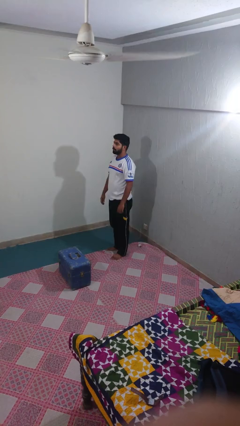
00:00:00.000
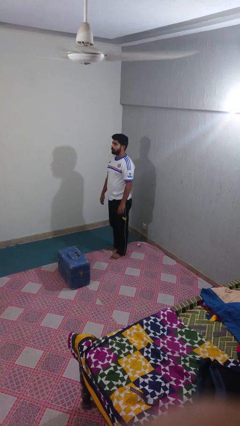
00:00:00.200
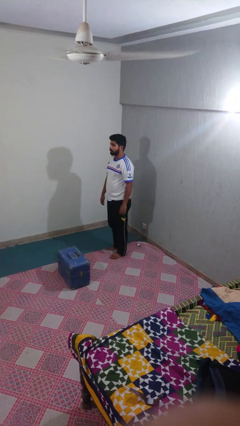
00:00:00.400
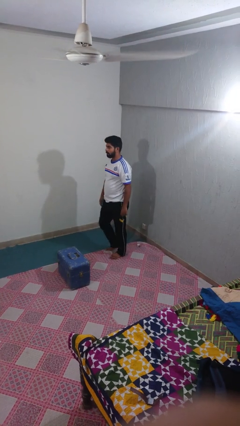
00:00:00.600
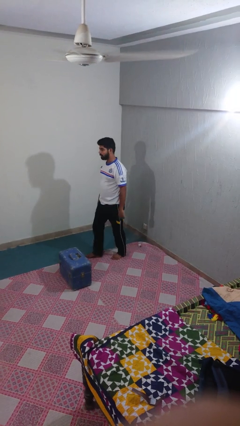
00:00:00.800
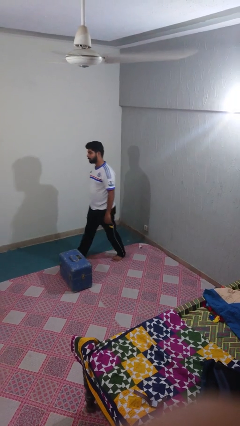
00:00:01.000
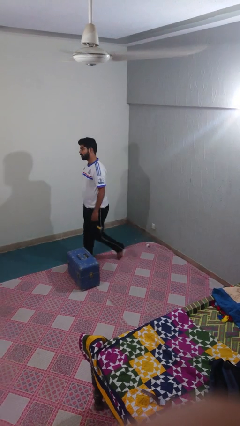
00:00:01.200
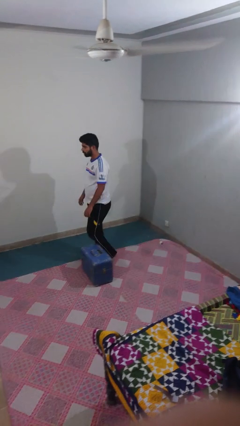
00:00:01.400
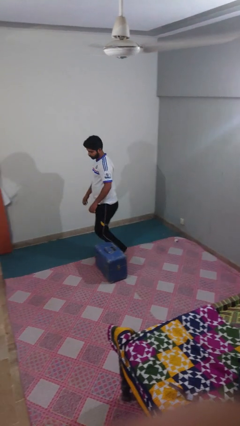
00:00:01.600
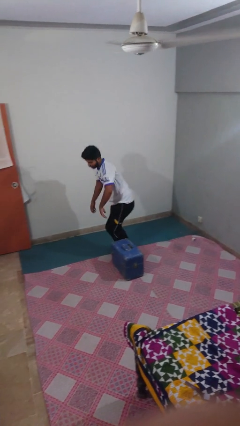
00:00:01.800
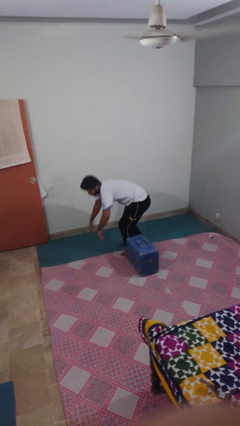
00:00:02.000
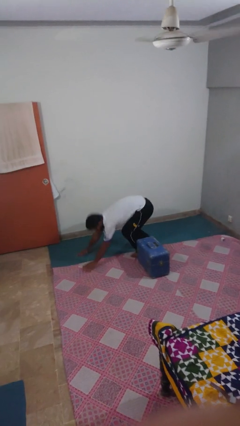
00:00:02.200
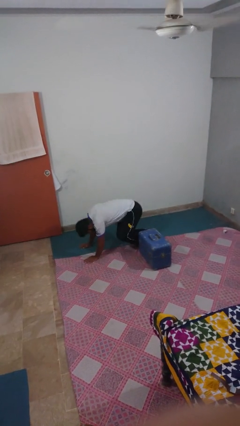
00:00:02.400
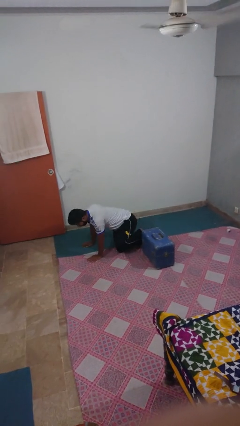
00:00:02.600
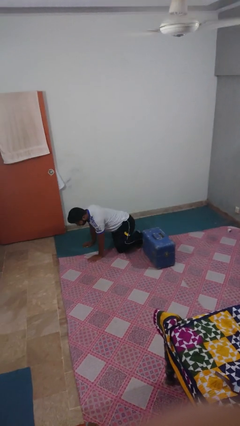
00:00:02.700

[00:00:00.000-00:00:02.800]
person trips on object on floor

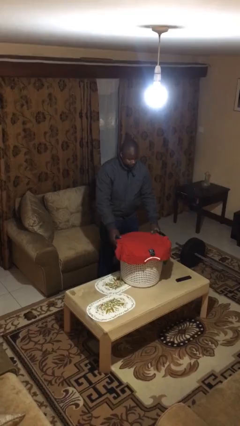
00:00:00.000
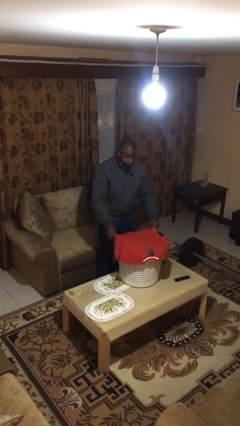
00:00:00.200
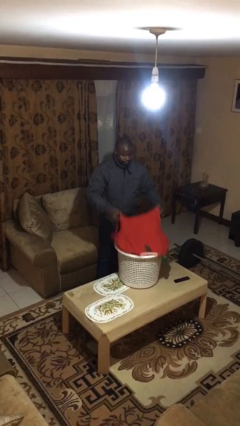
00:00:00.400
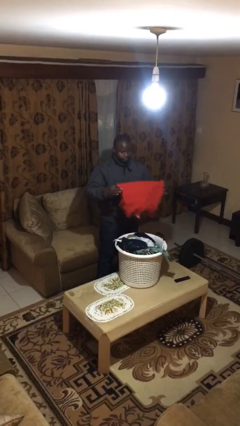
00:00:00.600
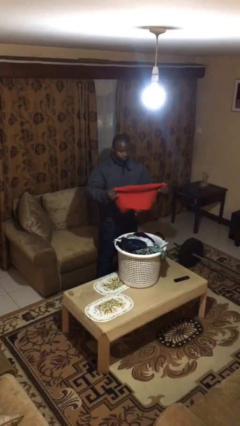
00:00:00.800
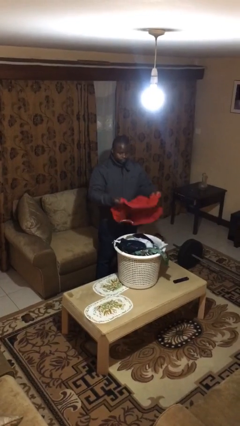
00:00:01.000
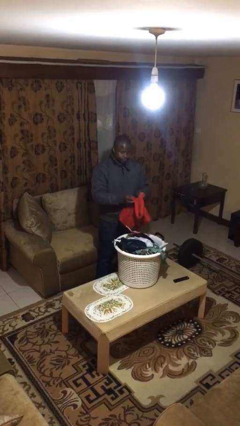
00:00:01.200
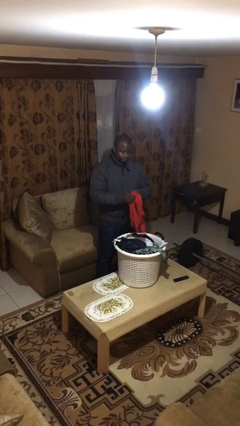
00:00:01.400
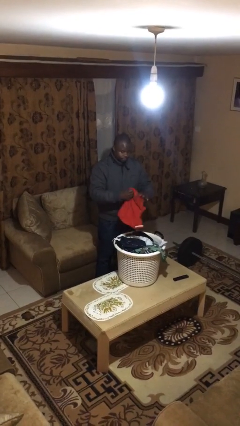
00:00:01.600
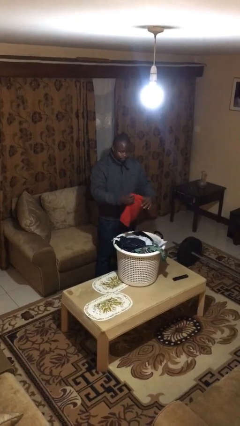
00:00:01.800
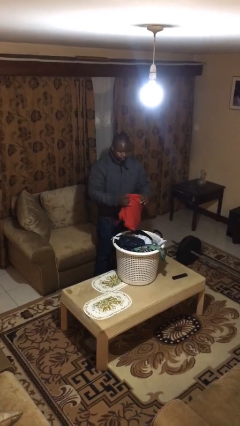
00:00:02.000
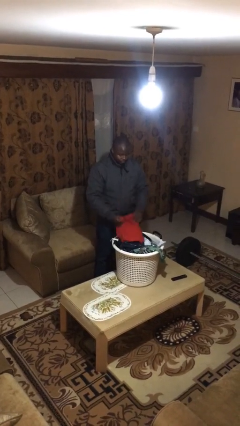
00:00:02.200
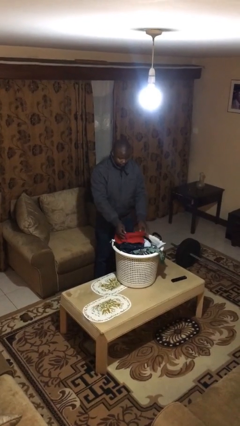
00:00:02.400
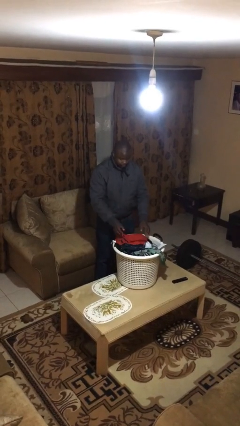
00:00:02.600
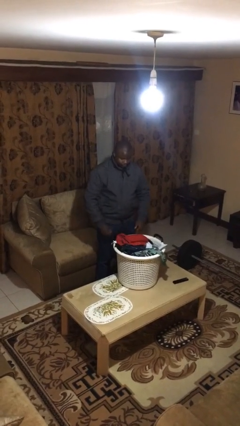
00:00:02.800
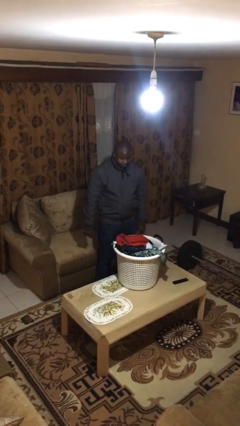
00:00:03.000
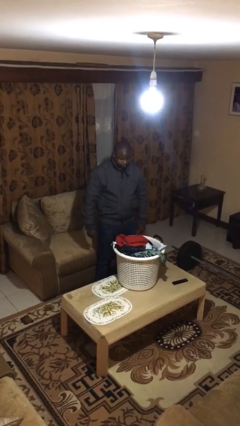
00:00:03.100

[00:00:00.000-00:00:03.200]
person folds shirt

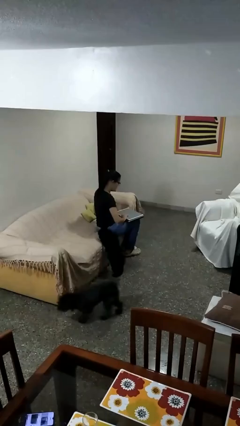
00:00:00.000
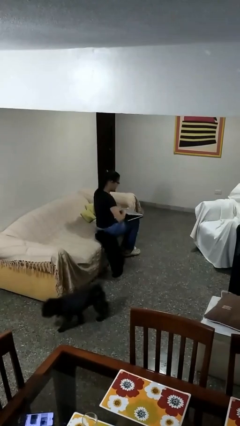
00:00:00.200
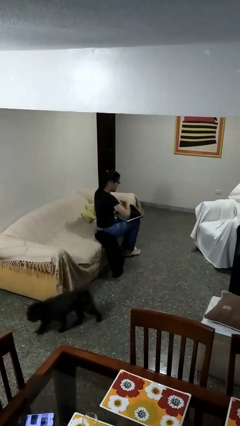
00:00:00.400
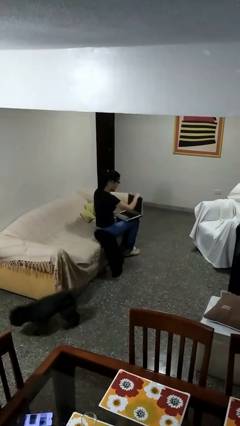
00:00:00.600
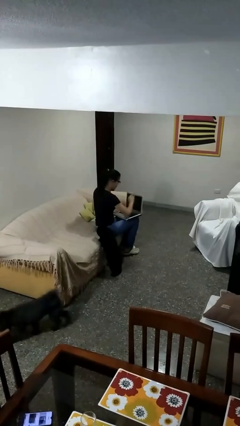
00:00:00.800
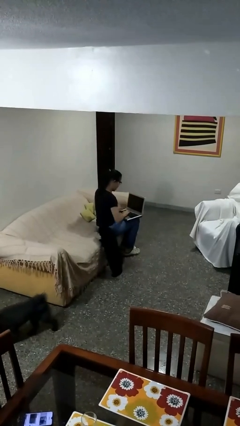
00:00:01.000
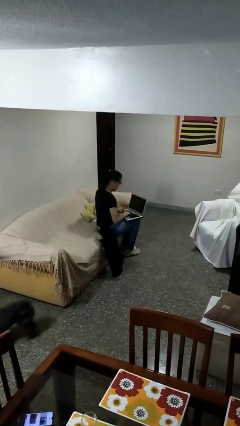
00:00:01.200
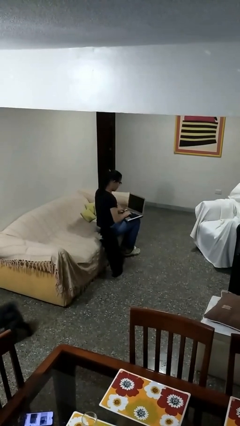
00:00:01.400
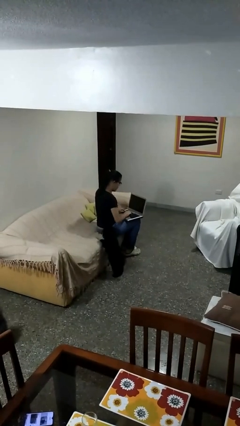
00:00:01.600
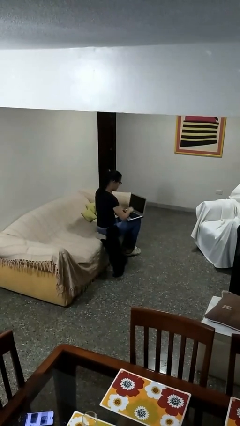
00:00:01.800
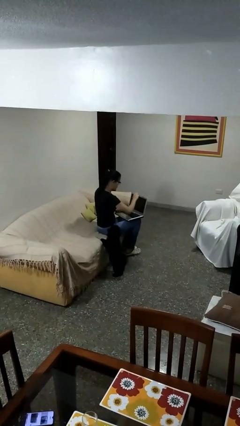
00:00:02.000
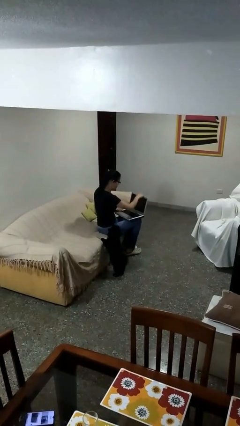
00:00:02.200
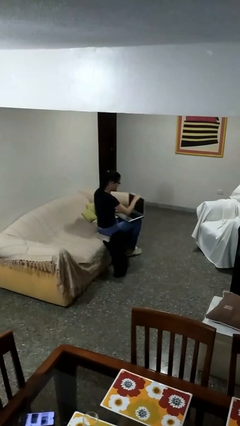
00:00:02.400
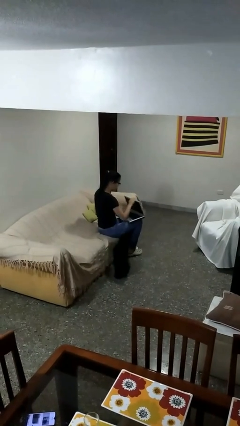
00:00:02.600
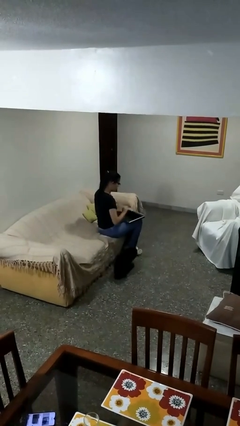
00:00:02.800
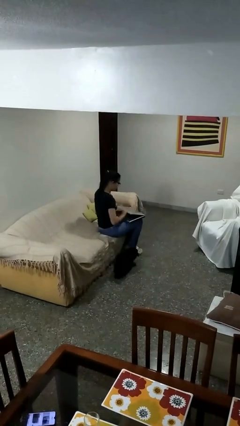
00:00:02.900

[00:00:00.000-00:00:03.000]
person interacts with laptop

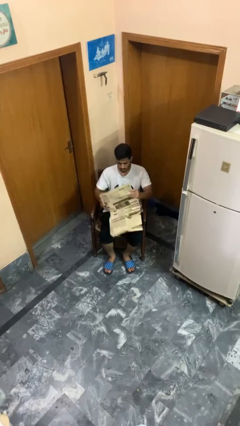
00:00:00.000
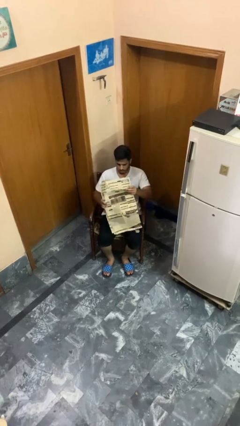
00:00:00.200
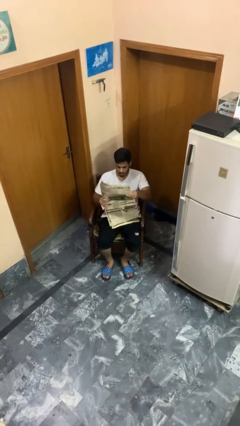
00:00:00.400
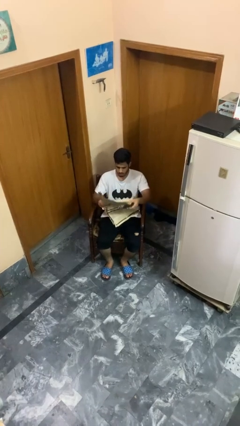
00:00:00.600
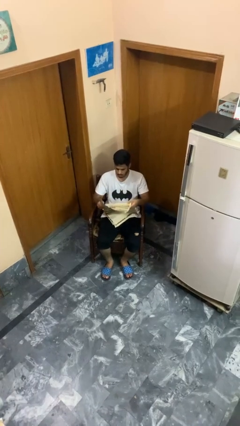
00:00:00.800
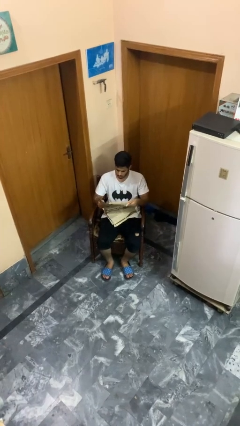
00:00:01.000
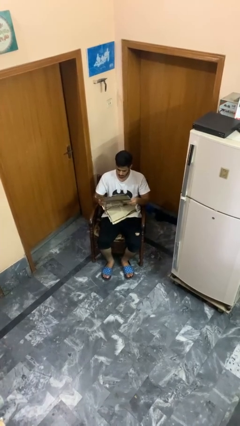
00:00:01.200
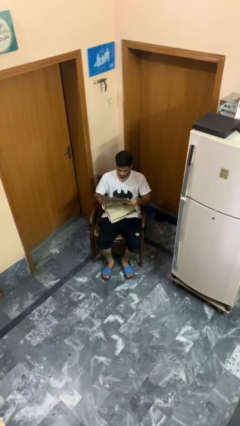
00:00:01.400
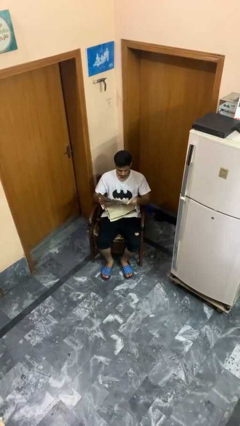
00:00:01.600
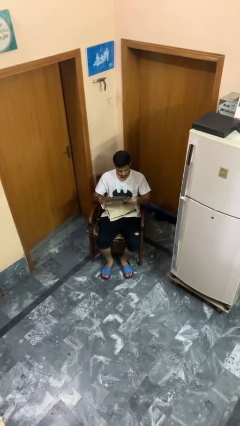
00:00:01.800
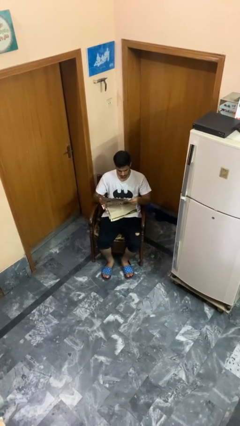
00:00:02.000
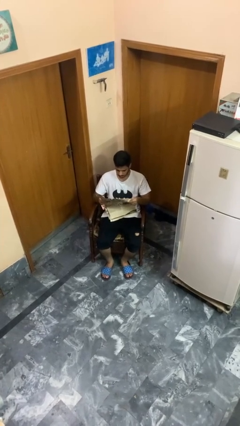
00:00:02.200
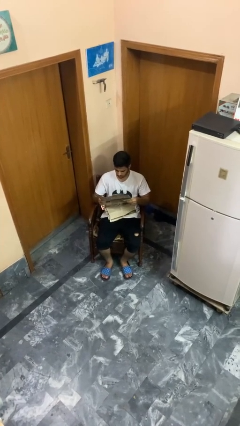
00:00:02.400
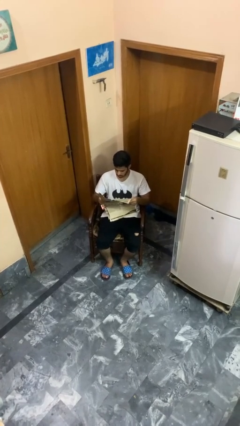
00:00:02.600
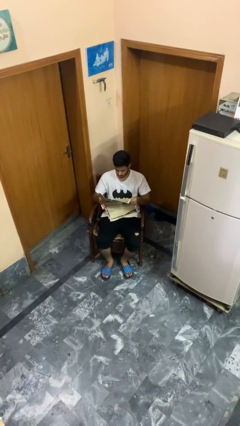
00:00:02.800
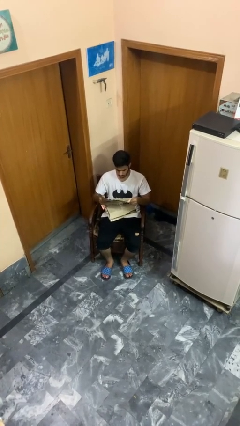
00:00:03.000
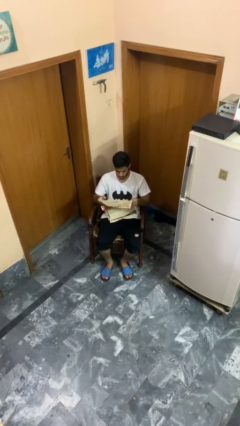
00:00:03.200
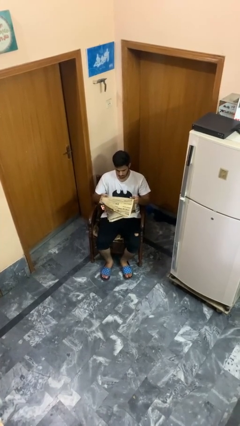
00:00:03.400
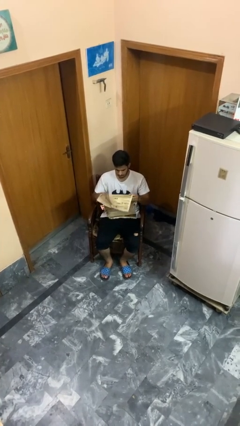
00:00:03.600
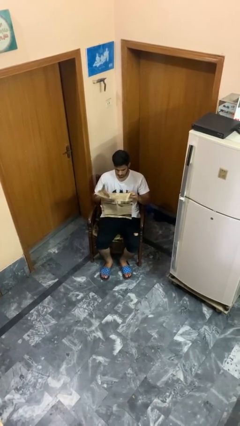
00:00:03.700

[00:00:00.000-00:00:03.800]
person reads newspaper

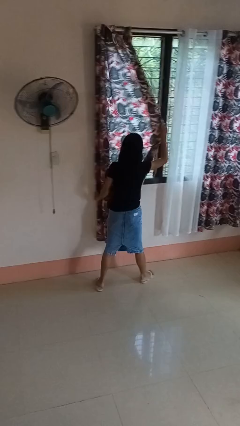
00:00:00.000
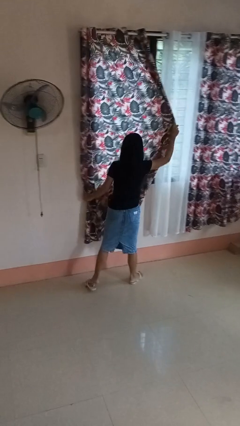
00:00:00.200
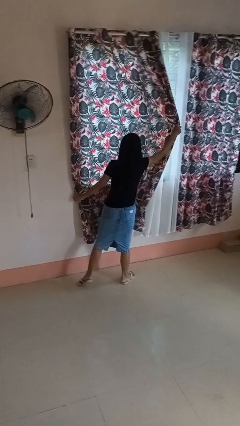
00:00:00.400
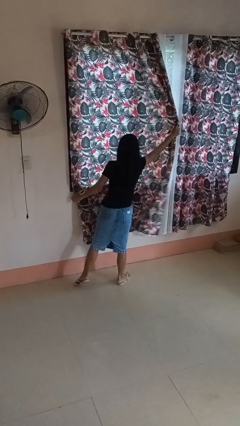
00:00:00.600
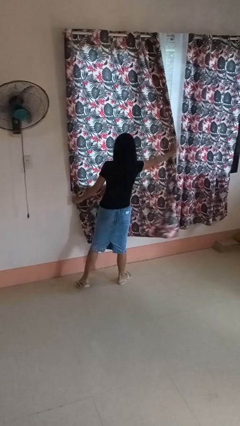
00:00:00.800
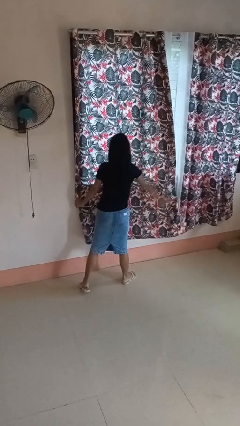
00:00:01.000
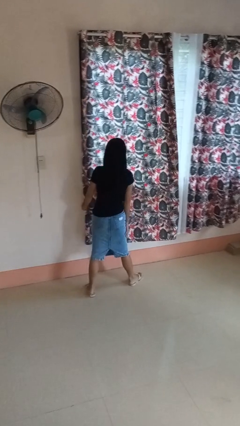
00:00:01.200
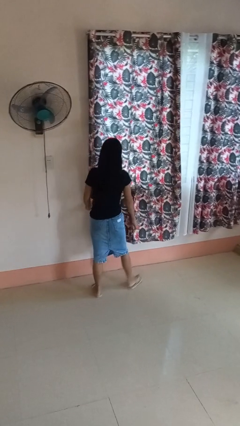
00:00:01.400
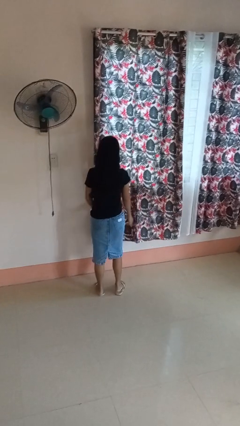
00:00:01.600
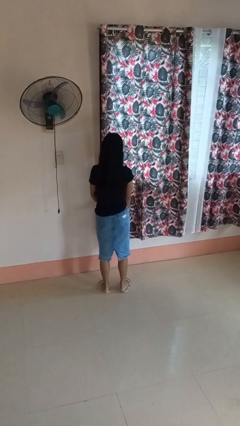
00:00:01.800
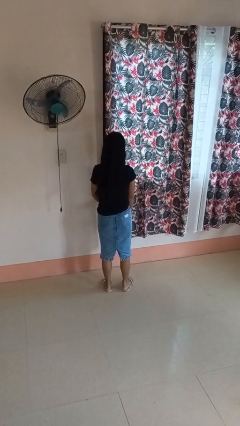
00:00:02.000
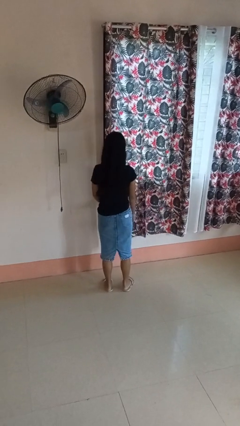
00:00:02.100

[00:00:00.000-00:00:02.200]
person closes curtains

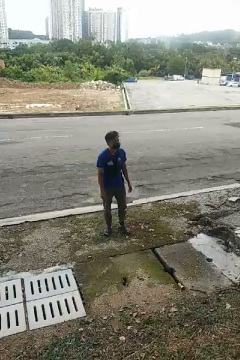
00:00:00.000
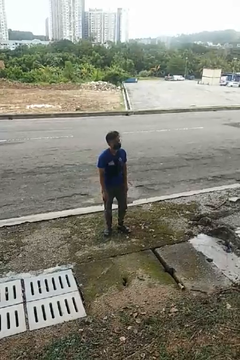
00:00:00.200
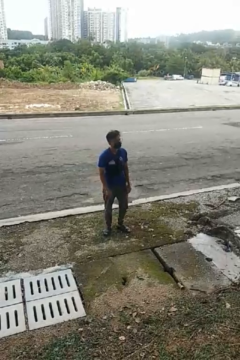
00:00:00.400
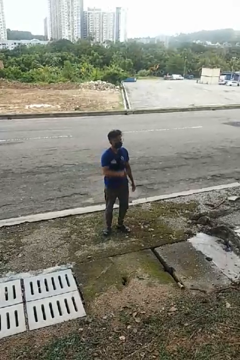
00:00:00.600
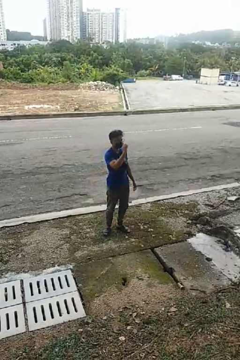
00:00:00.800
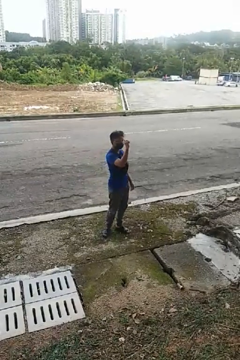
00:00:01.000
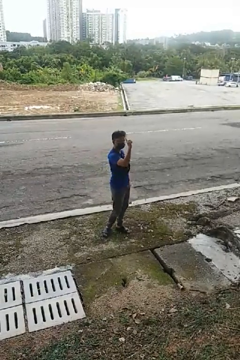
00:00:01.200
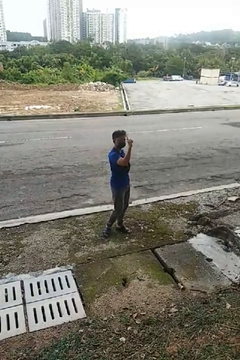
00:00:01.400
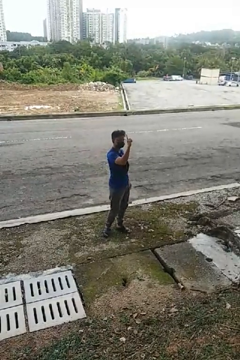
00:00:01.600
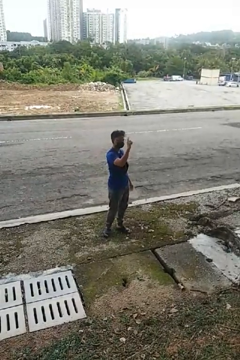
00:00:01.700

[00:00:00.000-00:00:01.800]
person gestures number one

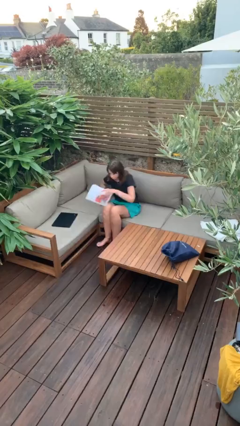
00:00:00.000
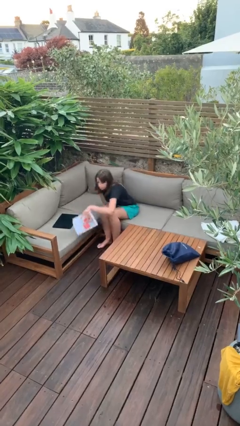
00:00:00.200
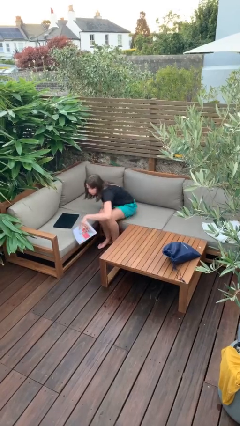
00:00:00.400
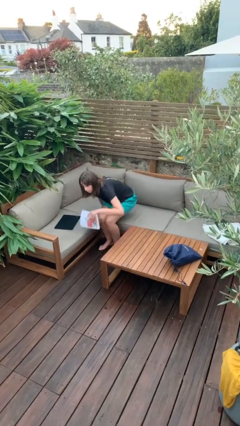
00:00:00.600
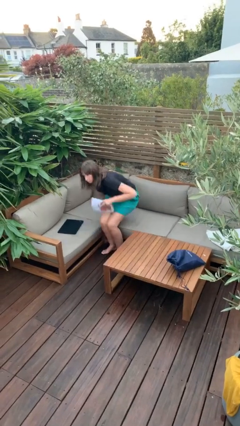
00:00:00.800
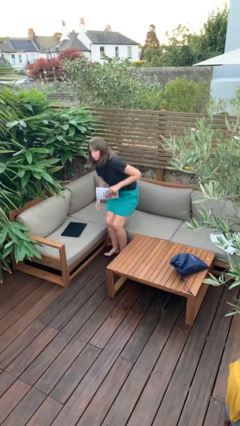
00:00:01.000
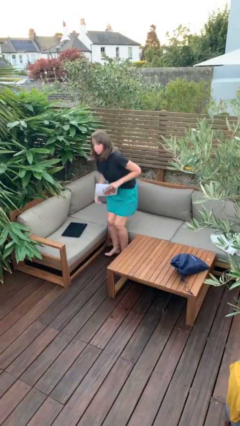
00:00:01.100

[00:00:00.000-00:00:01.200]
person stands up
